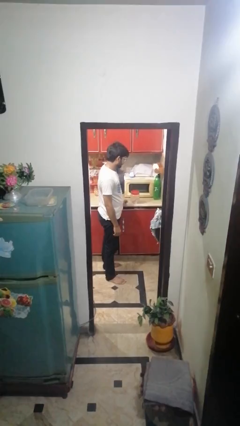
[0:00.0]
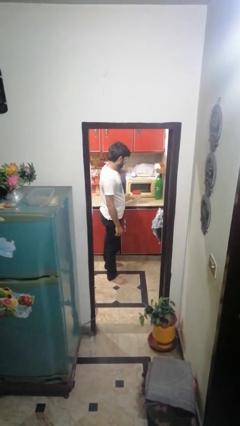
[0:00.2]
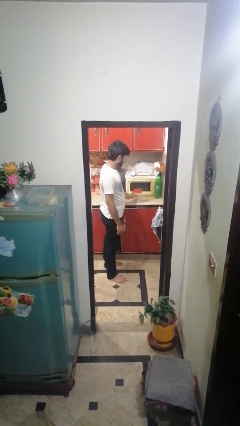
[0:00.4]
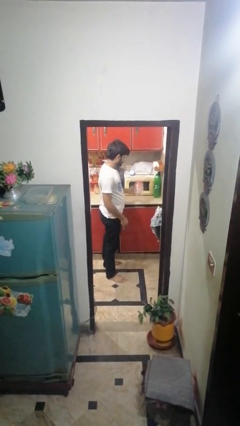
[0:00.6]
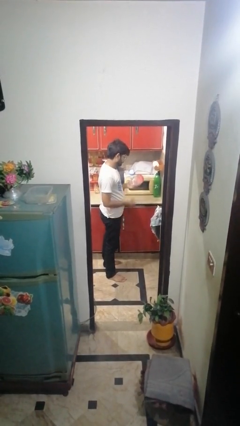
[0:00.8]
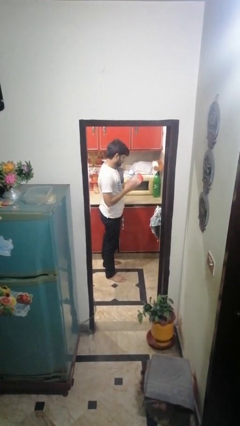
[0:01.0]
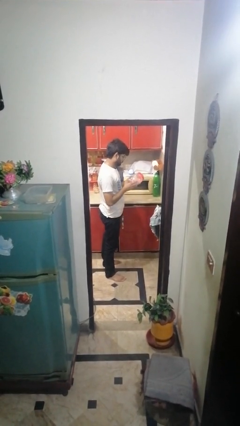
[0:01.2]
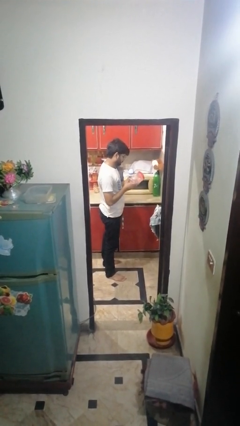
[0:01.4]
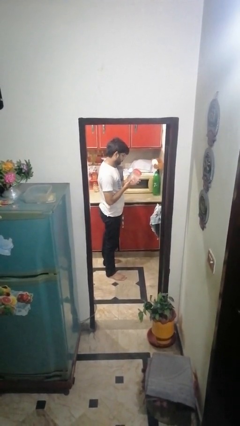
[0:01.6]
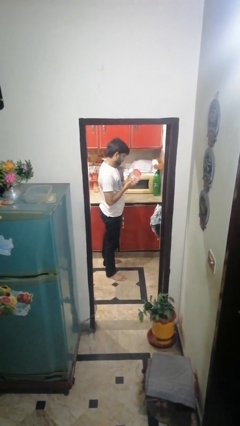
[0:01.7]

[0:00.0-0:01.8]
person picks up object from countertop

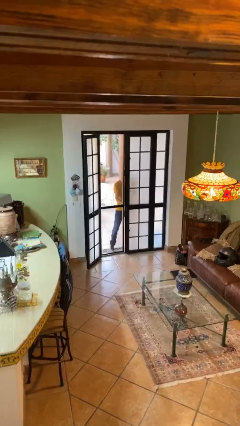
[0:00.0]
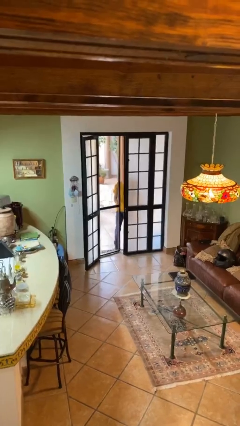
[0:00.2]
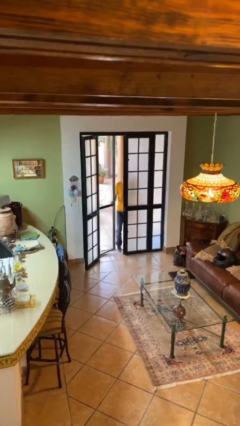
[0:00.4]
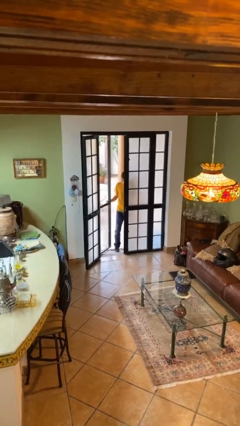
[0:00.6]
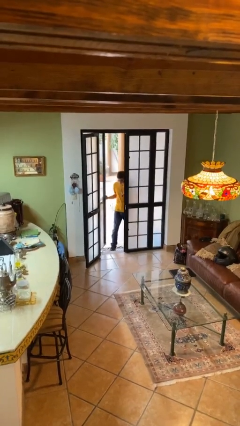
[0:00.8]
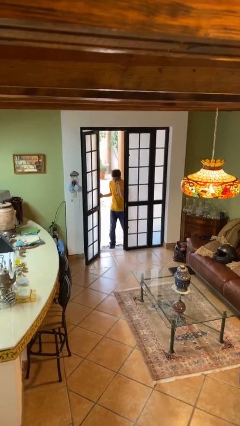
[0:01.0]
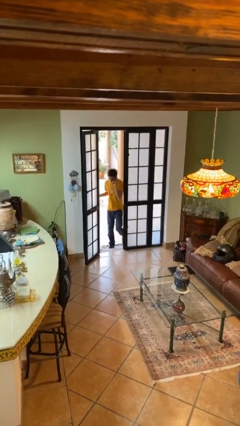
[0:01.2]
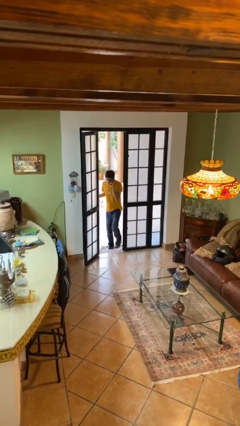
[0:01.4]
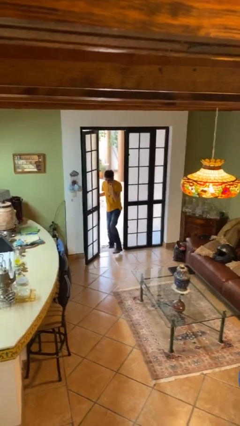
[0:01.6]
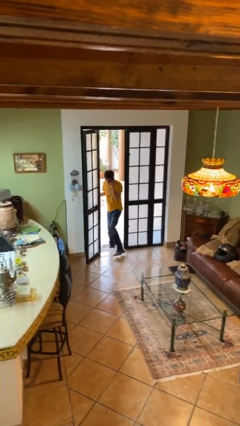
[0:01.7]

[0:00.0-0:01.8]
person opens facility door

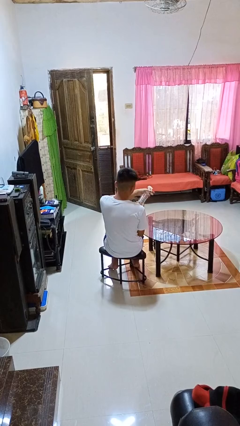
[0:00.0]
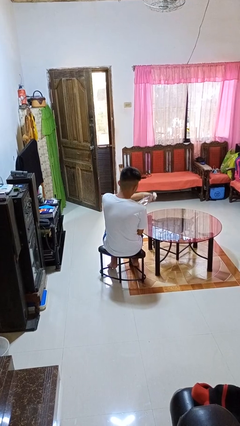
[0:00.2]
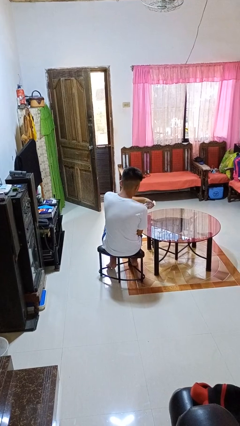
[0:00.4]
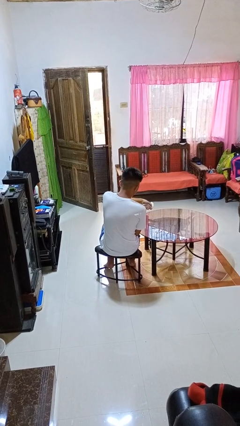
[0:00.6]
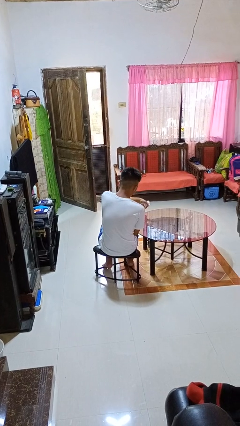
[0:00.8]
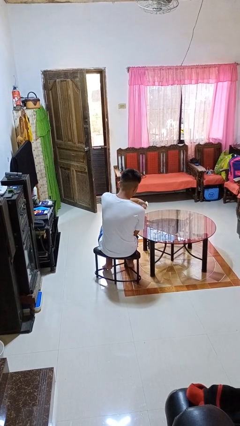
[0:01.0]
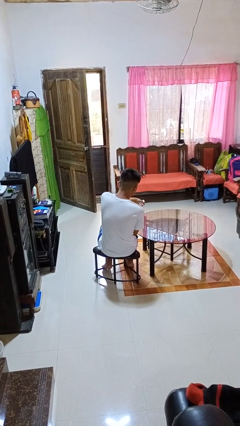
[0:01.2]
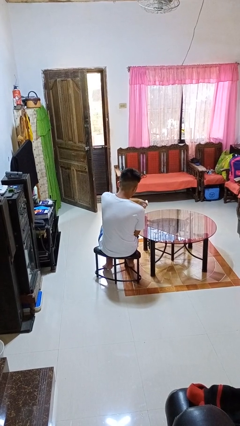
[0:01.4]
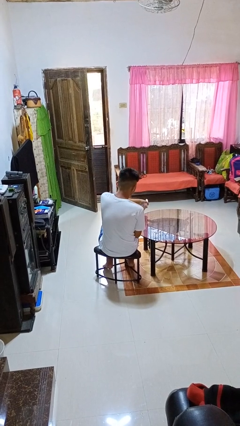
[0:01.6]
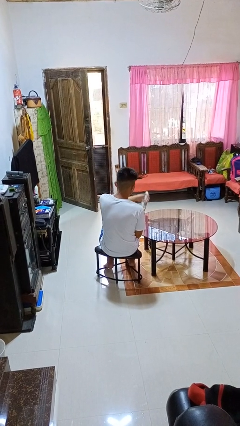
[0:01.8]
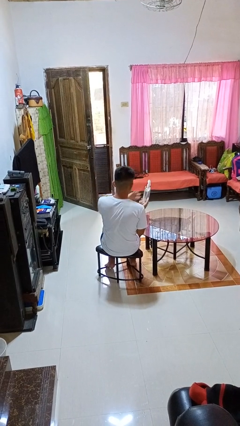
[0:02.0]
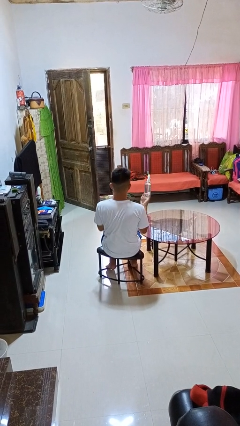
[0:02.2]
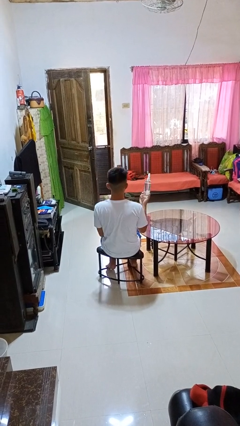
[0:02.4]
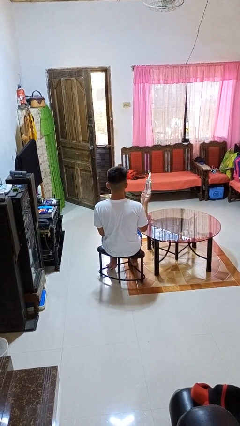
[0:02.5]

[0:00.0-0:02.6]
person sprays from bottle

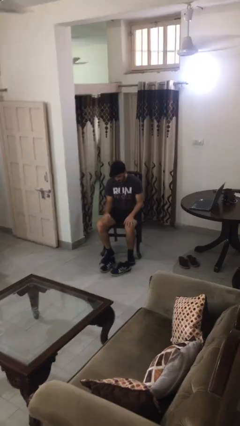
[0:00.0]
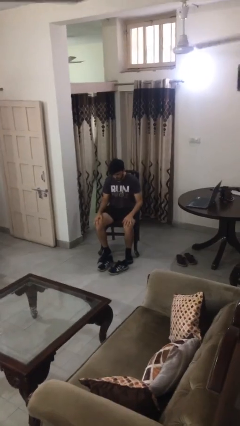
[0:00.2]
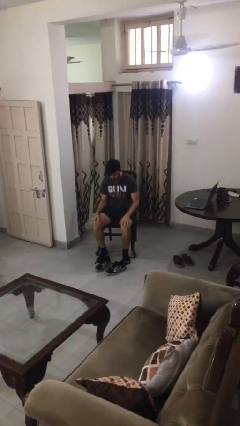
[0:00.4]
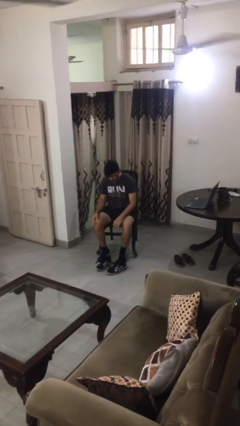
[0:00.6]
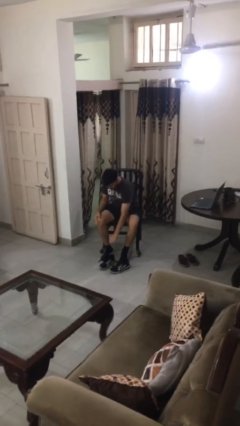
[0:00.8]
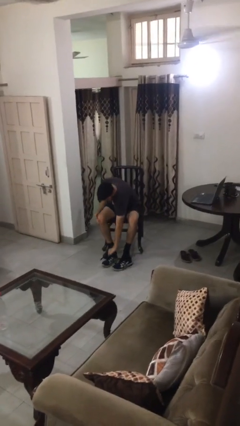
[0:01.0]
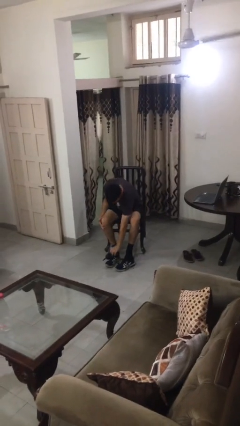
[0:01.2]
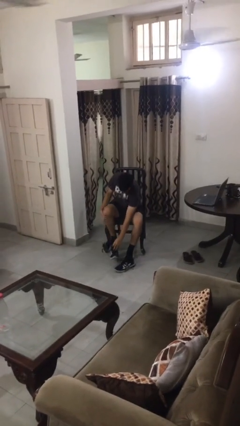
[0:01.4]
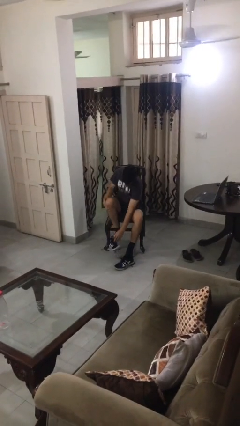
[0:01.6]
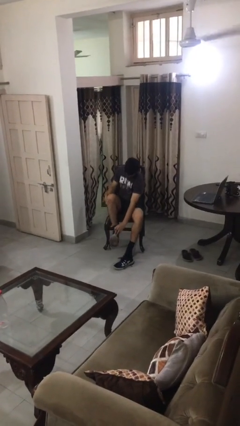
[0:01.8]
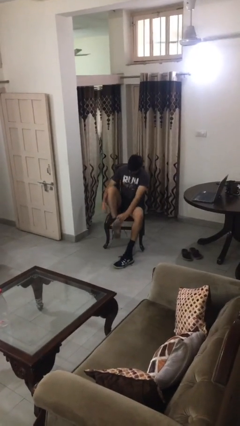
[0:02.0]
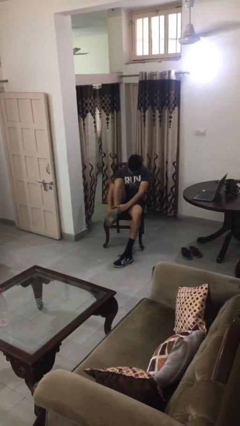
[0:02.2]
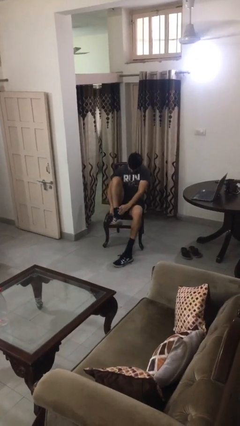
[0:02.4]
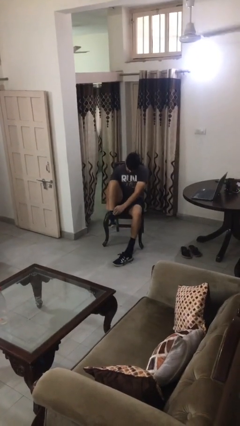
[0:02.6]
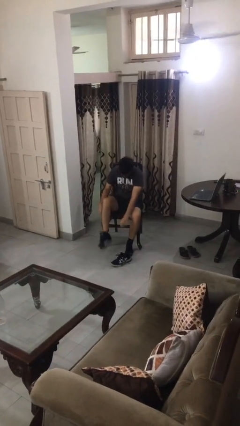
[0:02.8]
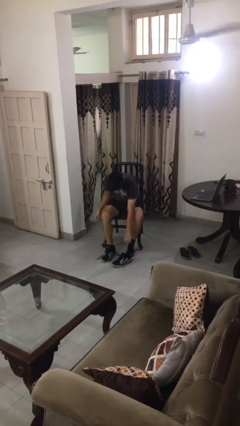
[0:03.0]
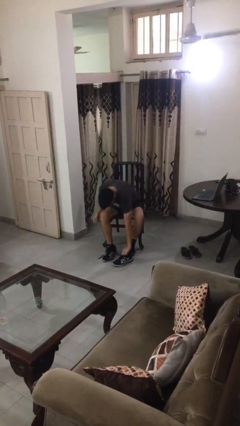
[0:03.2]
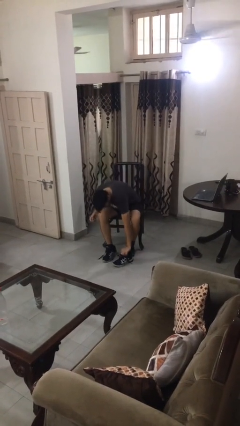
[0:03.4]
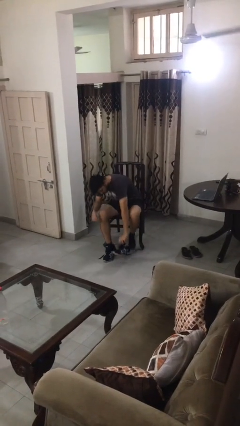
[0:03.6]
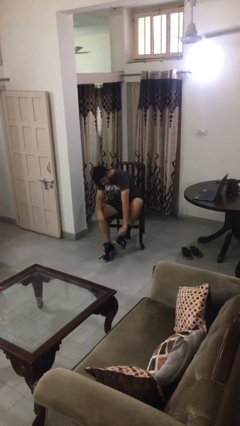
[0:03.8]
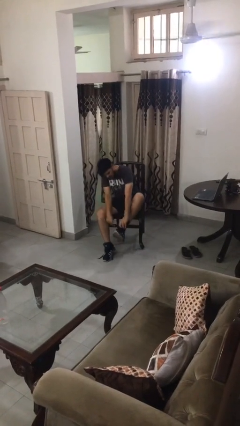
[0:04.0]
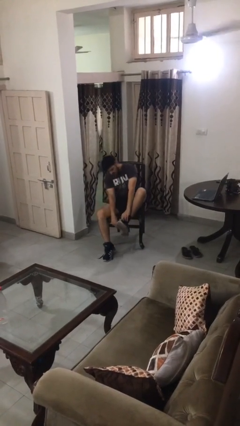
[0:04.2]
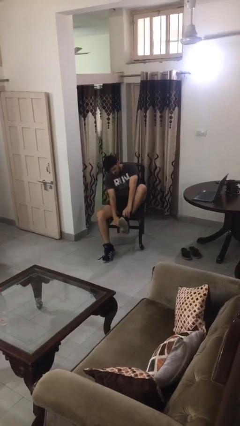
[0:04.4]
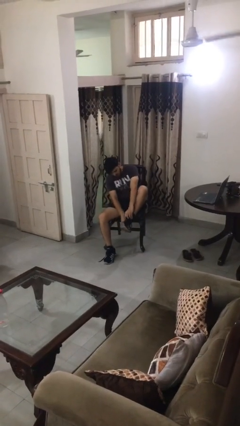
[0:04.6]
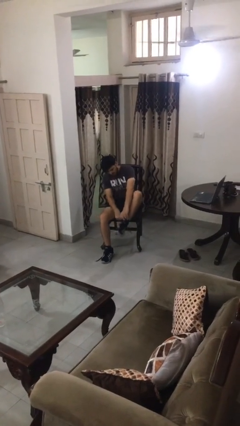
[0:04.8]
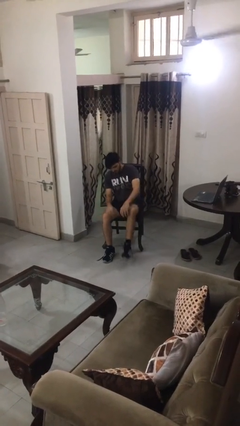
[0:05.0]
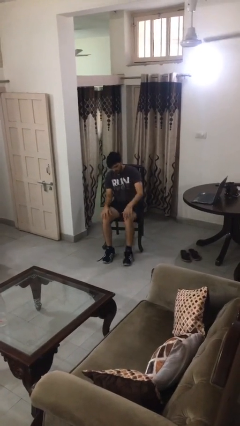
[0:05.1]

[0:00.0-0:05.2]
person puts on shoes

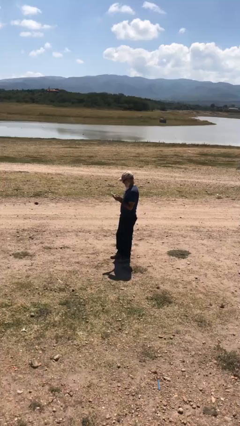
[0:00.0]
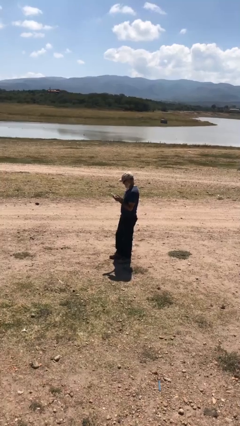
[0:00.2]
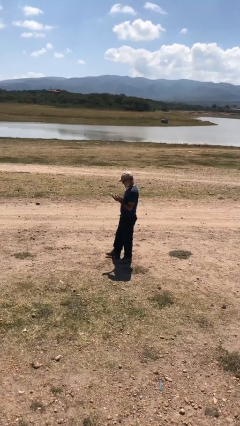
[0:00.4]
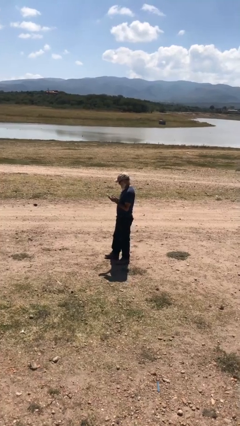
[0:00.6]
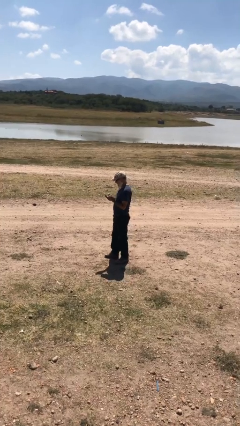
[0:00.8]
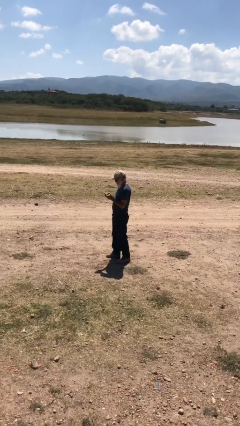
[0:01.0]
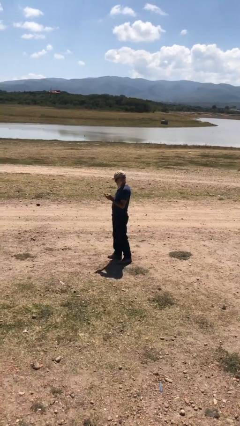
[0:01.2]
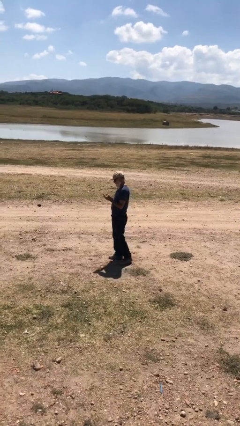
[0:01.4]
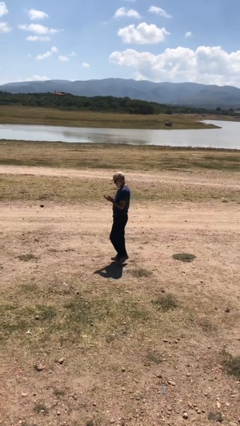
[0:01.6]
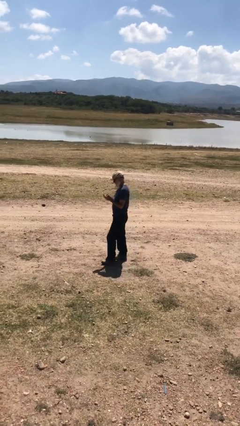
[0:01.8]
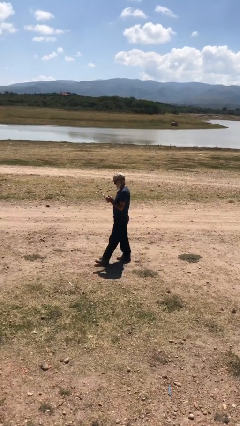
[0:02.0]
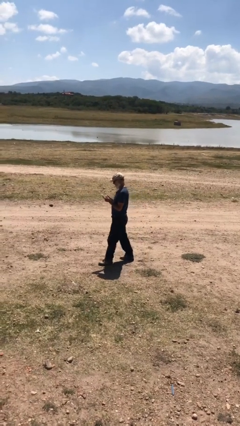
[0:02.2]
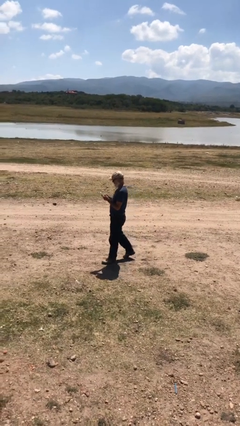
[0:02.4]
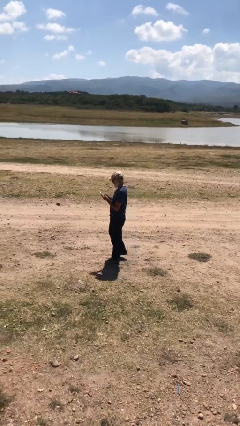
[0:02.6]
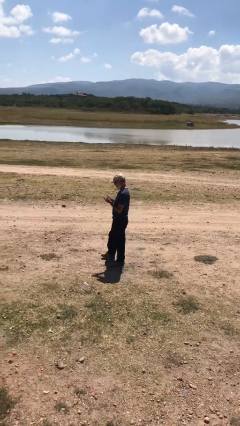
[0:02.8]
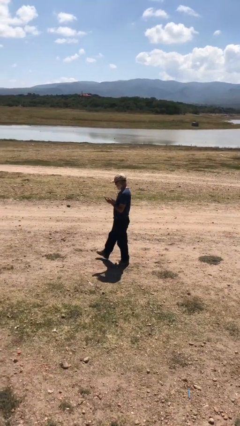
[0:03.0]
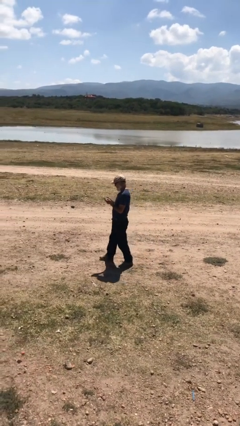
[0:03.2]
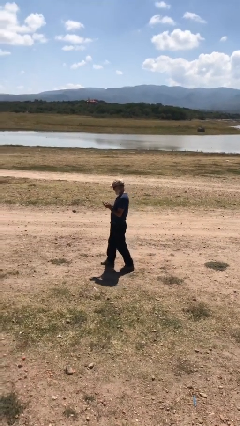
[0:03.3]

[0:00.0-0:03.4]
person texts on phone

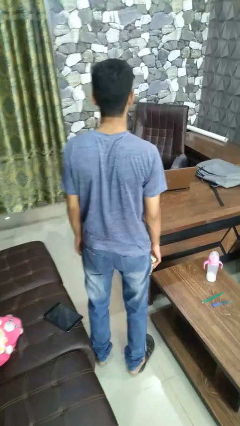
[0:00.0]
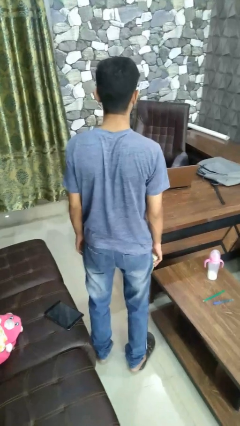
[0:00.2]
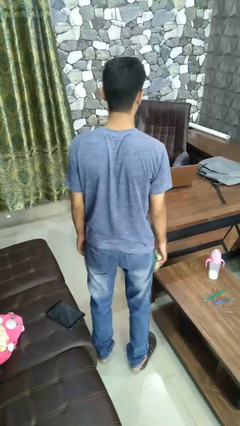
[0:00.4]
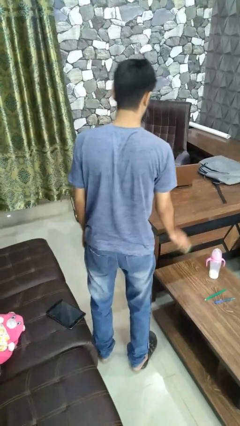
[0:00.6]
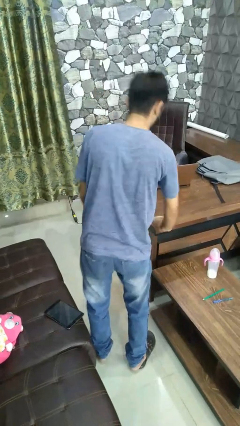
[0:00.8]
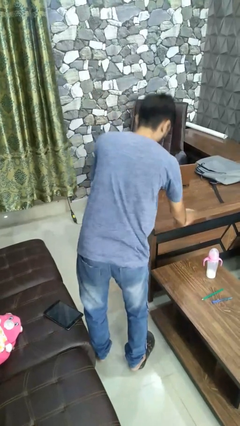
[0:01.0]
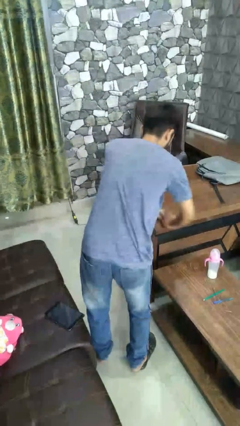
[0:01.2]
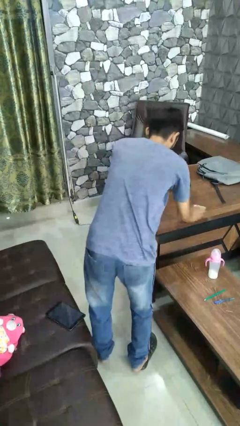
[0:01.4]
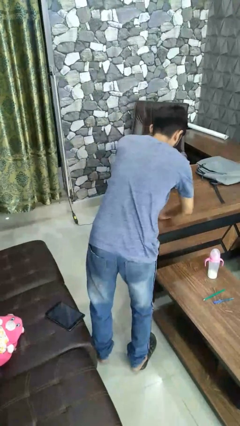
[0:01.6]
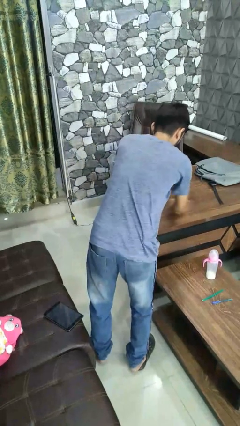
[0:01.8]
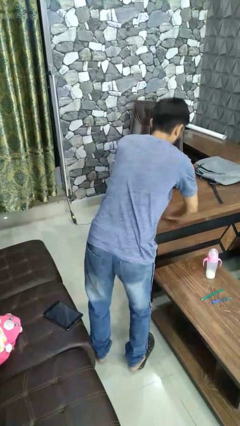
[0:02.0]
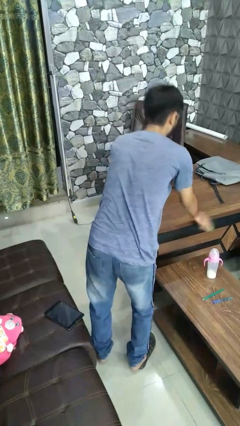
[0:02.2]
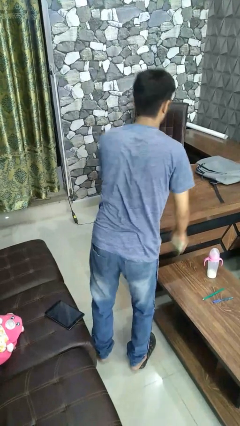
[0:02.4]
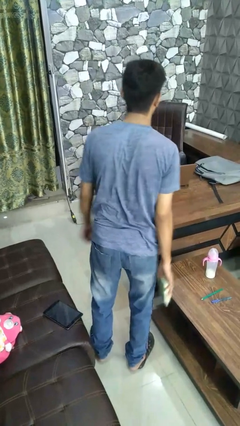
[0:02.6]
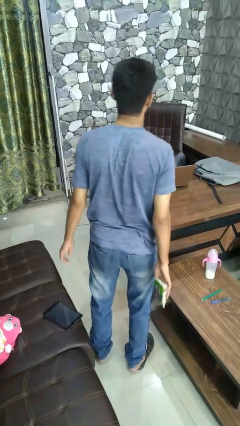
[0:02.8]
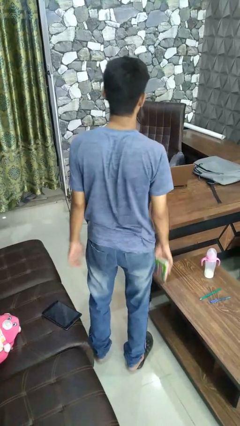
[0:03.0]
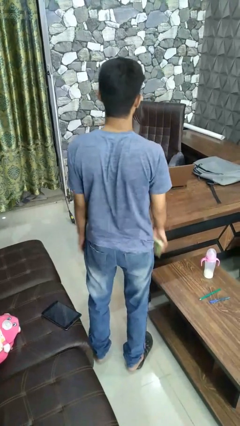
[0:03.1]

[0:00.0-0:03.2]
person dusts furniture
